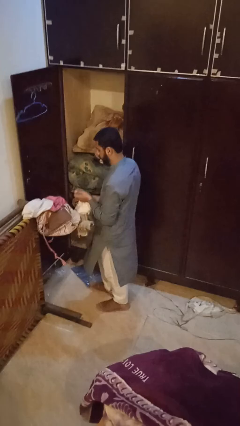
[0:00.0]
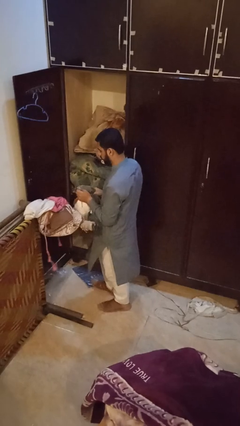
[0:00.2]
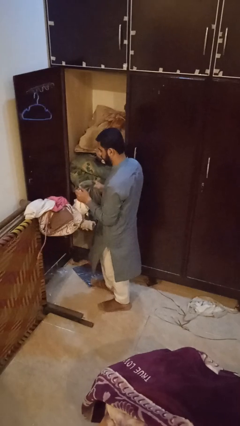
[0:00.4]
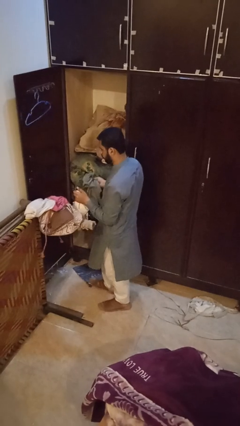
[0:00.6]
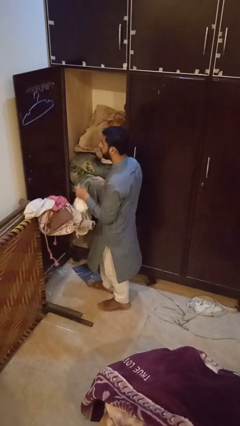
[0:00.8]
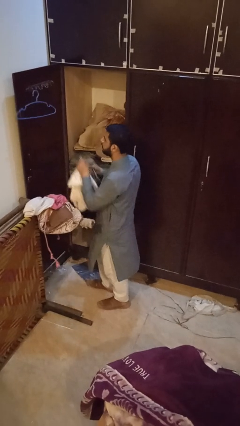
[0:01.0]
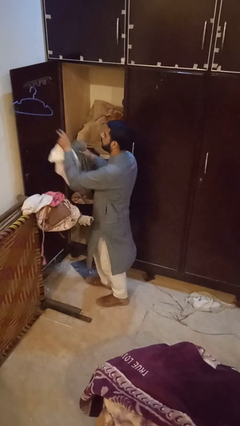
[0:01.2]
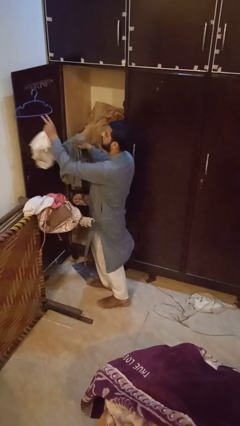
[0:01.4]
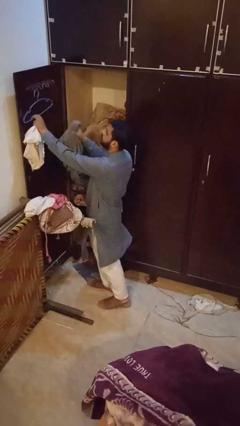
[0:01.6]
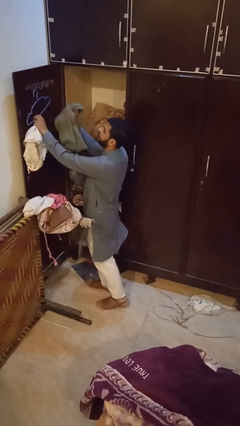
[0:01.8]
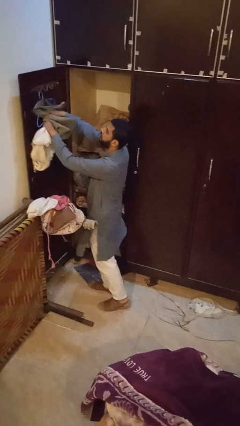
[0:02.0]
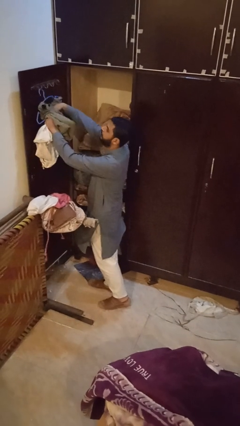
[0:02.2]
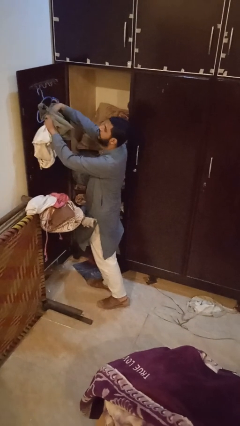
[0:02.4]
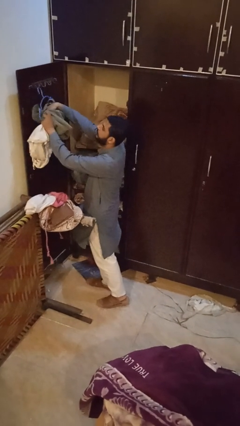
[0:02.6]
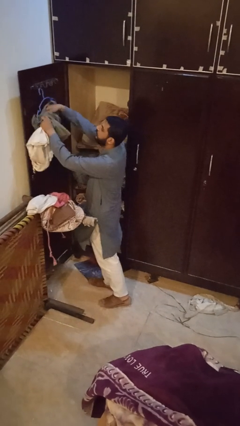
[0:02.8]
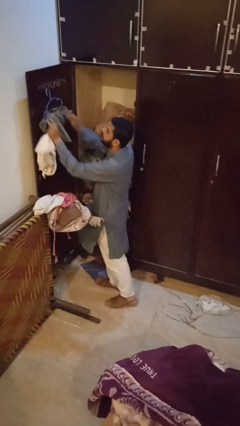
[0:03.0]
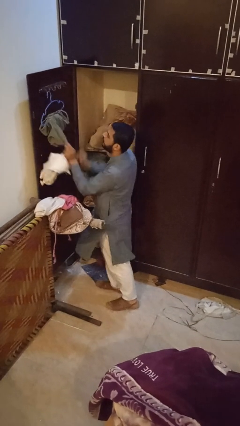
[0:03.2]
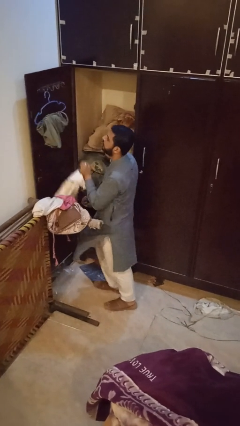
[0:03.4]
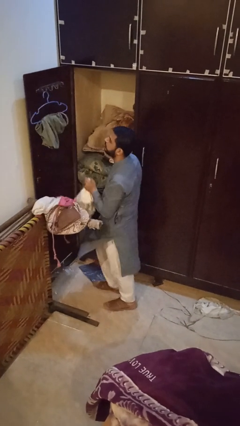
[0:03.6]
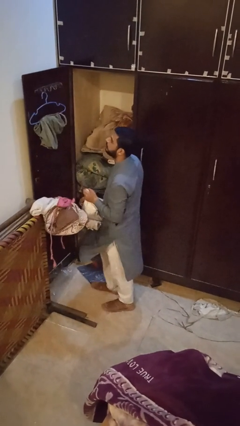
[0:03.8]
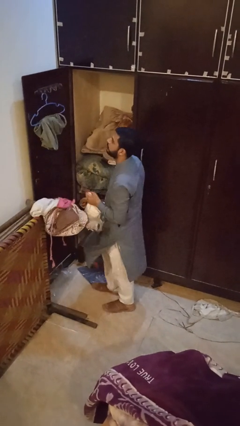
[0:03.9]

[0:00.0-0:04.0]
person puts clothes into closet

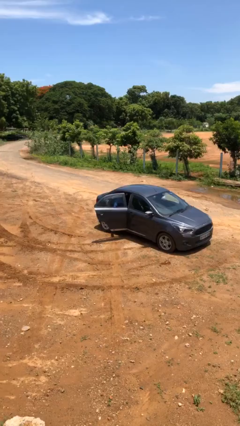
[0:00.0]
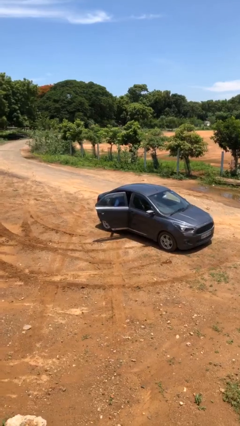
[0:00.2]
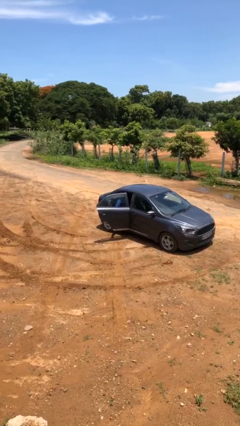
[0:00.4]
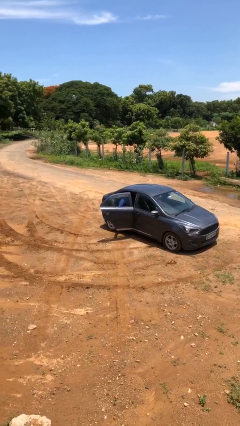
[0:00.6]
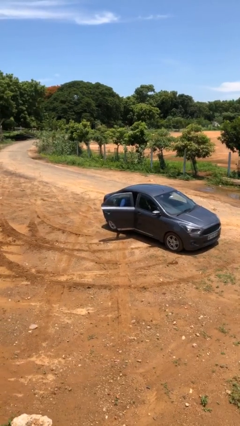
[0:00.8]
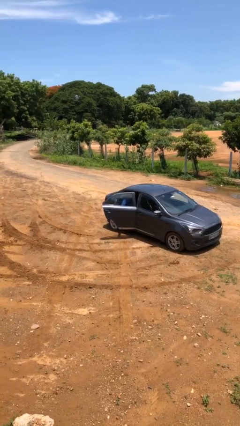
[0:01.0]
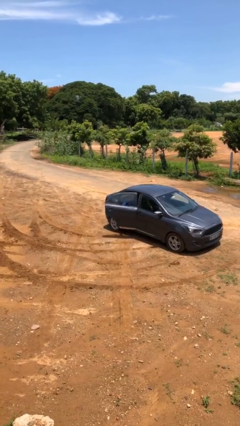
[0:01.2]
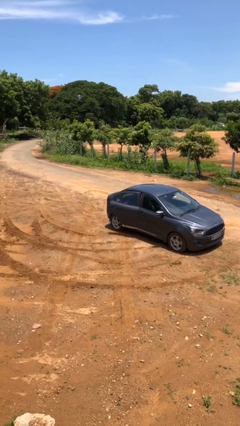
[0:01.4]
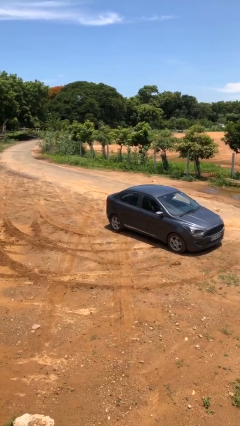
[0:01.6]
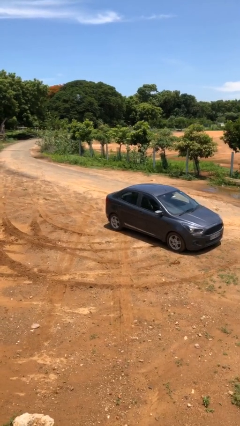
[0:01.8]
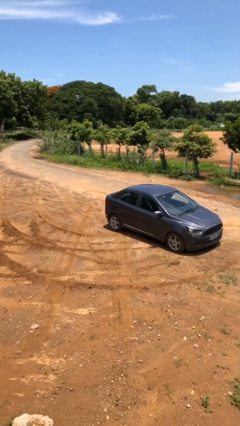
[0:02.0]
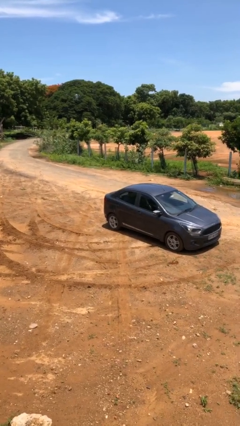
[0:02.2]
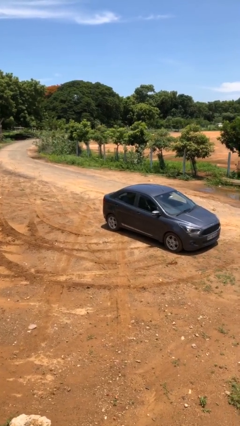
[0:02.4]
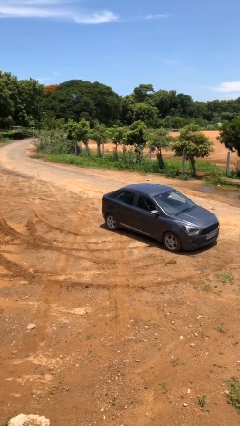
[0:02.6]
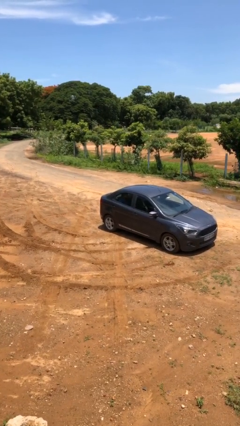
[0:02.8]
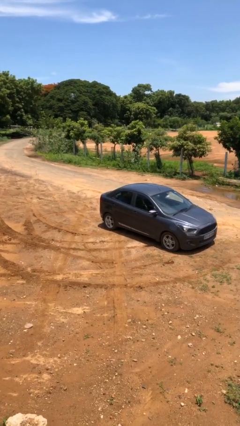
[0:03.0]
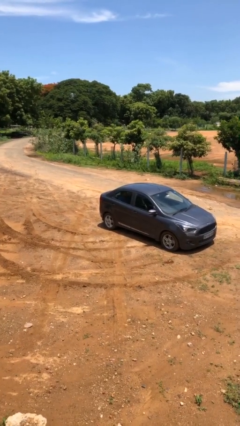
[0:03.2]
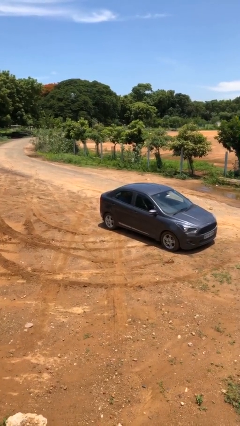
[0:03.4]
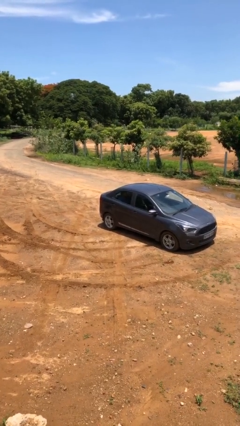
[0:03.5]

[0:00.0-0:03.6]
person closes car door

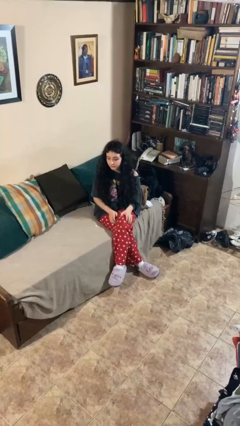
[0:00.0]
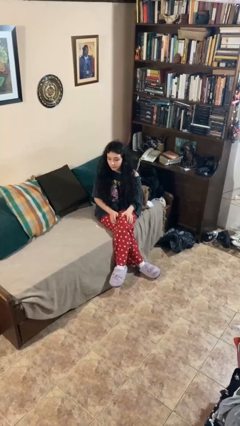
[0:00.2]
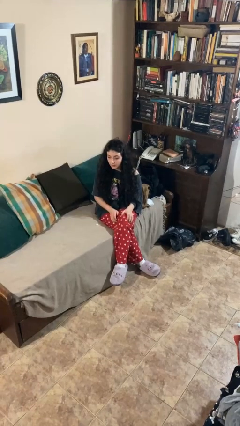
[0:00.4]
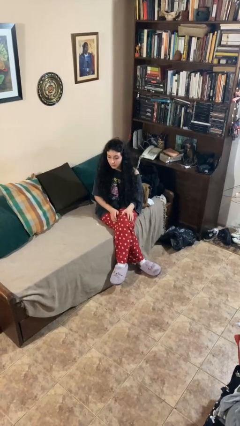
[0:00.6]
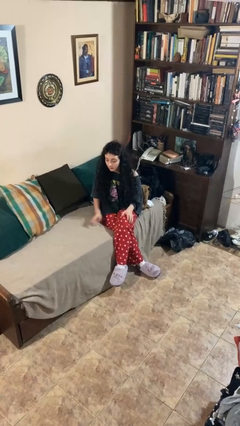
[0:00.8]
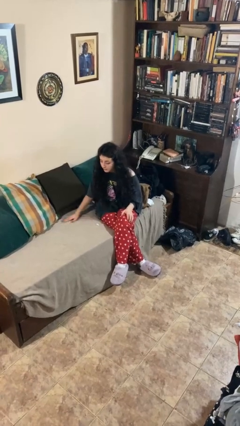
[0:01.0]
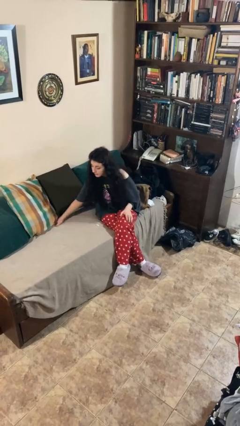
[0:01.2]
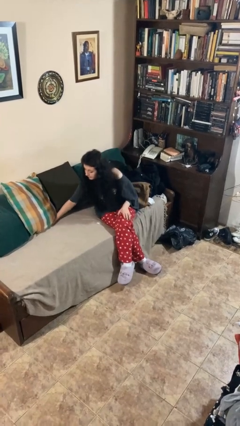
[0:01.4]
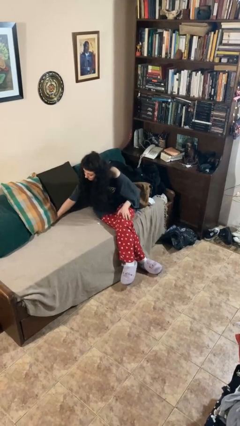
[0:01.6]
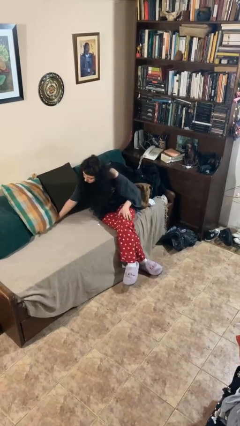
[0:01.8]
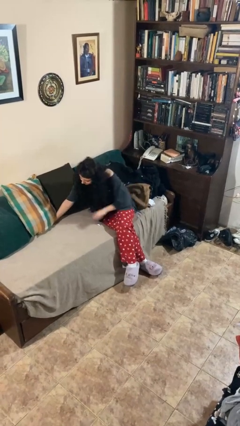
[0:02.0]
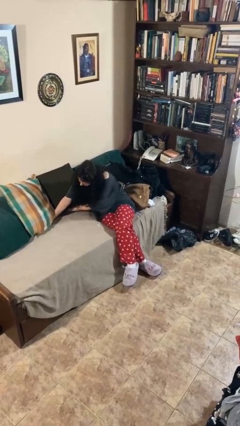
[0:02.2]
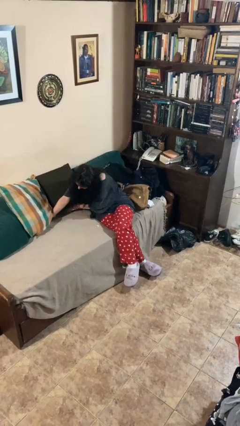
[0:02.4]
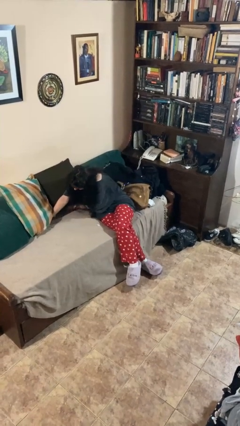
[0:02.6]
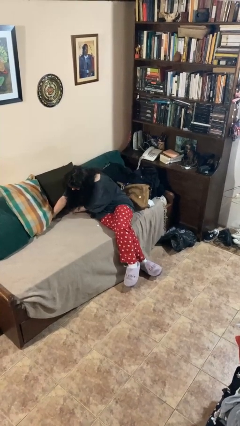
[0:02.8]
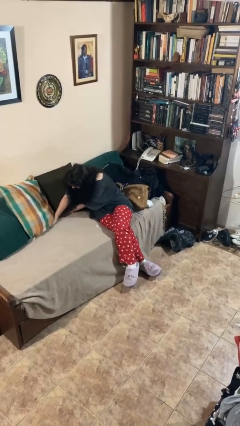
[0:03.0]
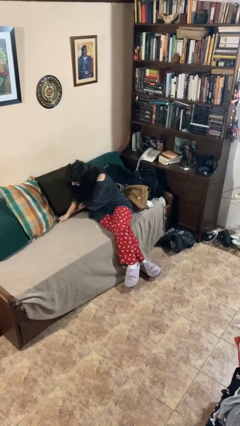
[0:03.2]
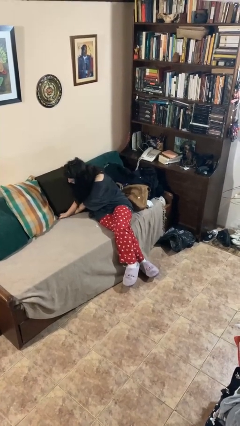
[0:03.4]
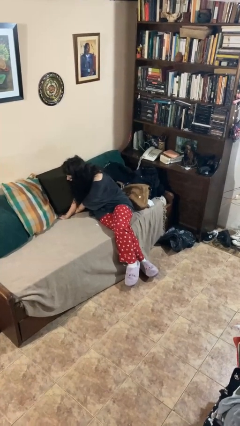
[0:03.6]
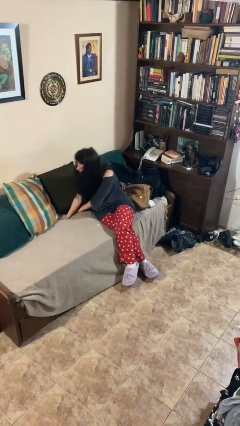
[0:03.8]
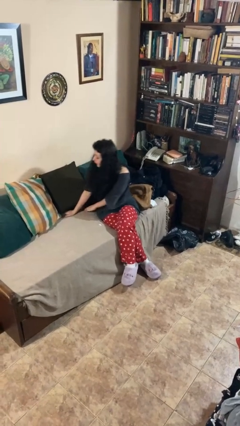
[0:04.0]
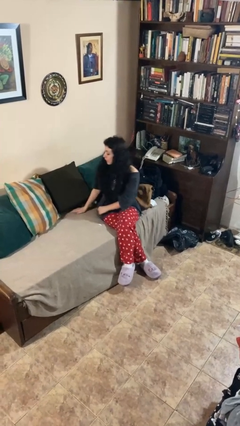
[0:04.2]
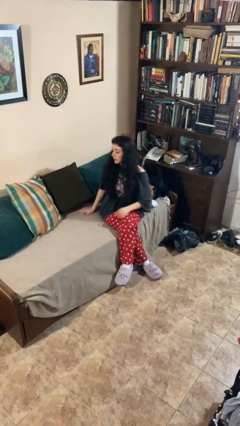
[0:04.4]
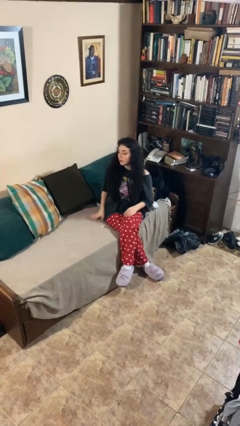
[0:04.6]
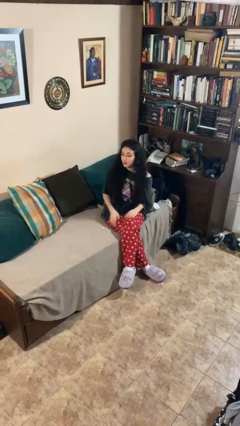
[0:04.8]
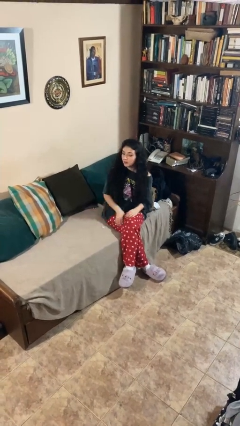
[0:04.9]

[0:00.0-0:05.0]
person searches in couch

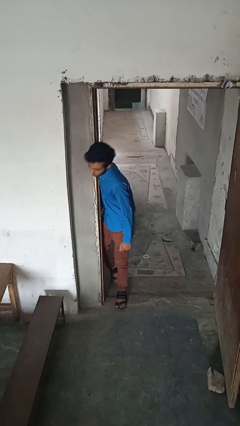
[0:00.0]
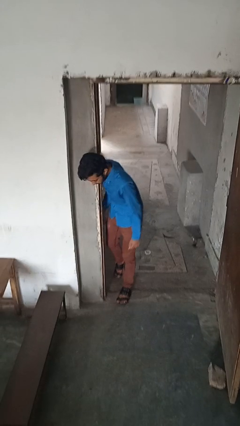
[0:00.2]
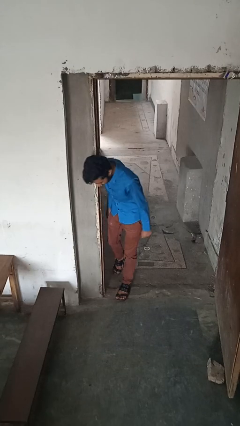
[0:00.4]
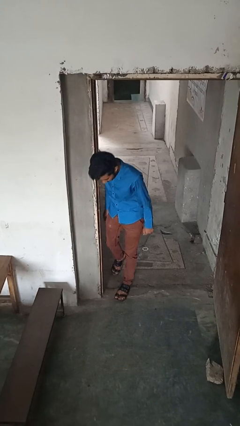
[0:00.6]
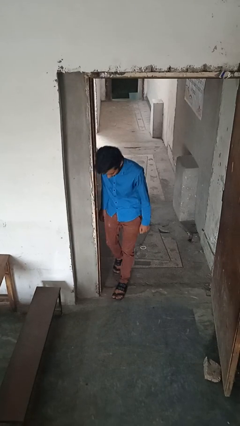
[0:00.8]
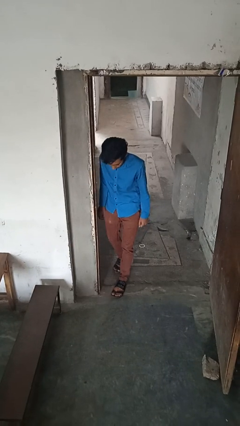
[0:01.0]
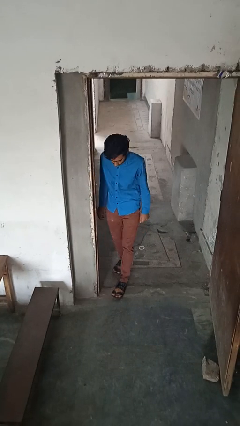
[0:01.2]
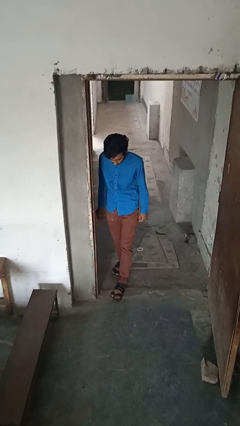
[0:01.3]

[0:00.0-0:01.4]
person bumps into wall

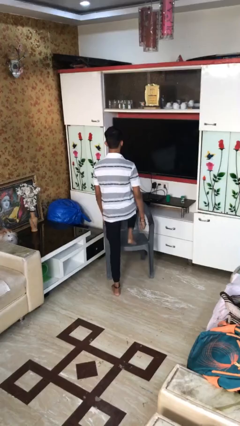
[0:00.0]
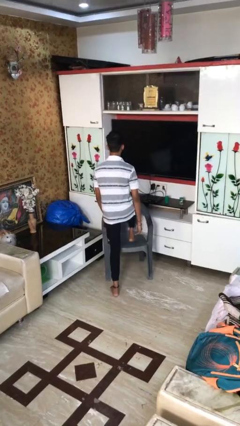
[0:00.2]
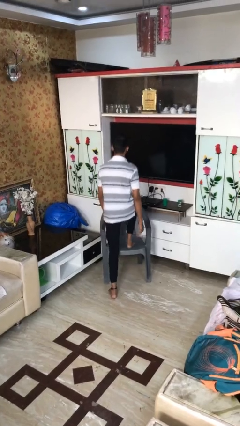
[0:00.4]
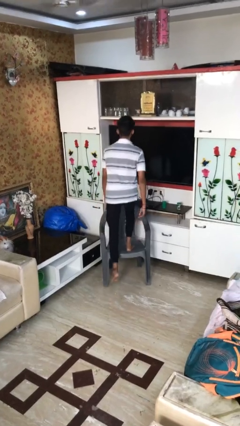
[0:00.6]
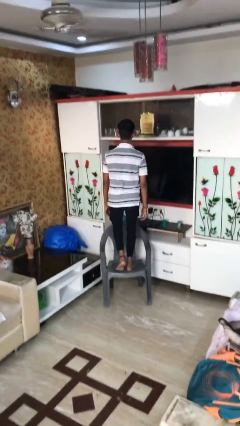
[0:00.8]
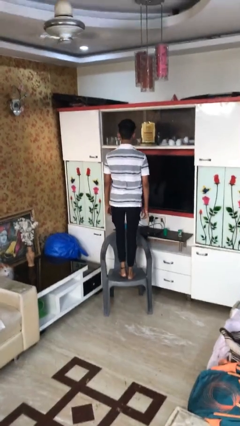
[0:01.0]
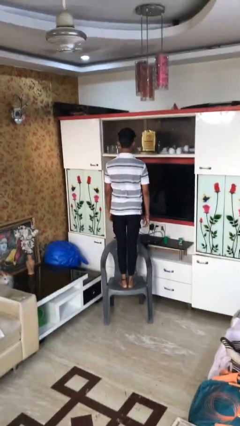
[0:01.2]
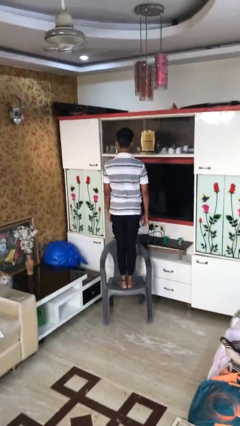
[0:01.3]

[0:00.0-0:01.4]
person climbs on chair

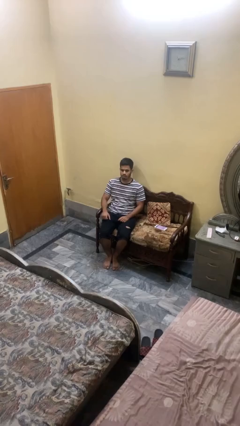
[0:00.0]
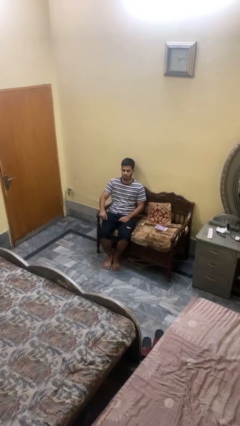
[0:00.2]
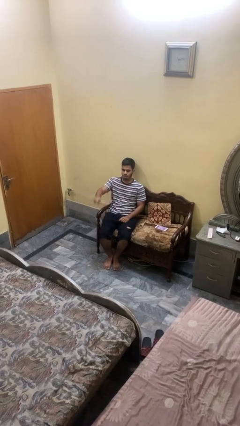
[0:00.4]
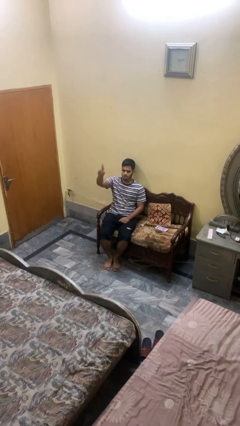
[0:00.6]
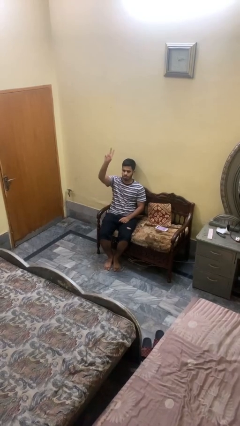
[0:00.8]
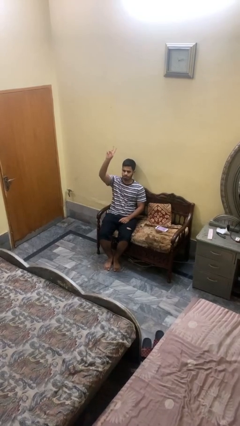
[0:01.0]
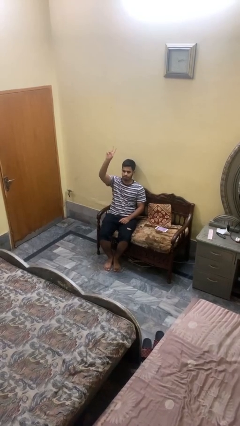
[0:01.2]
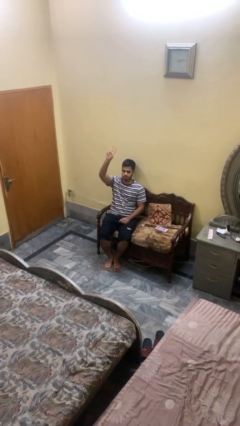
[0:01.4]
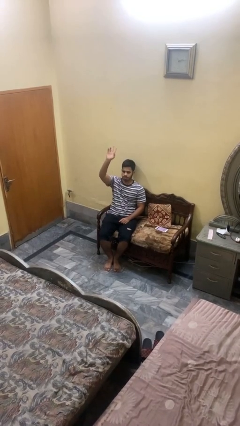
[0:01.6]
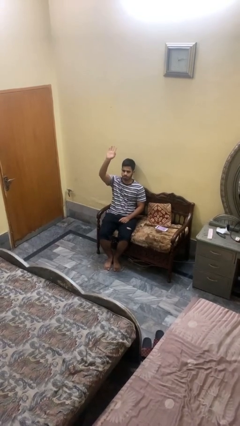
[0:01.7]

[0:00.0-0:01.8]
person gestures raise hand
